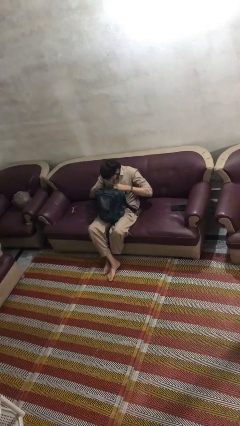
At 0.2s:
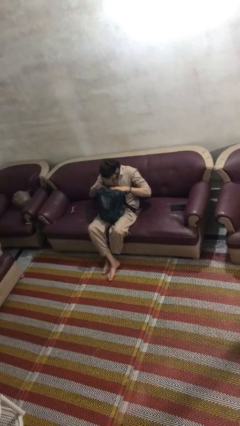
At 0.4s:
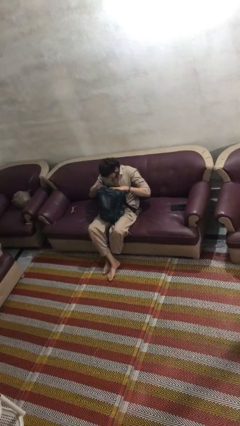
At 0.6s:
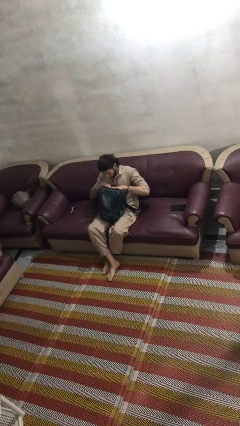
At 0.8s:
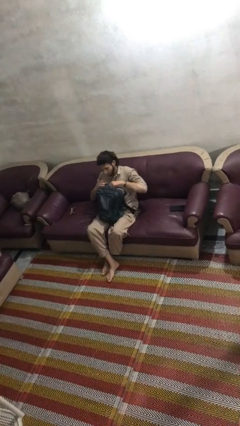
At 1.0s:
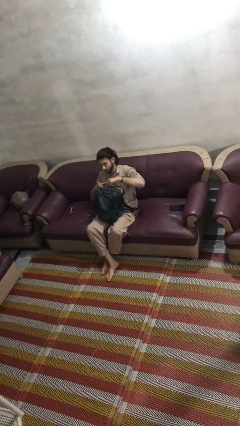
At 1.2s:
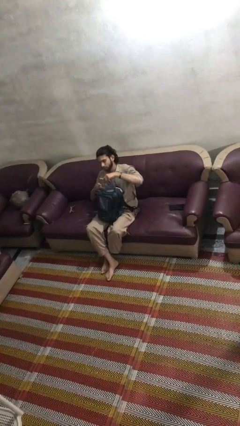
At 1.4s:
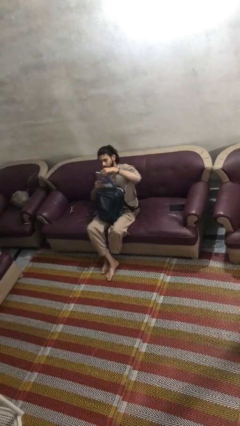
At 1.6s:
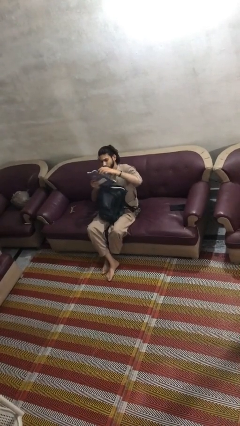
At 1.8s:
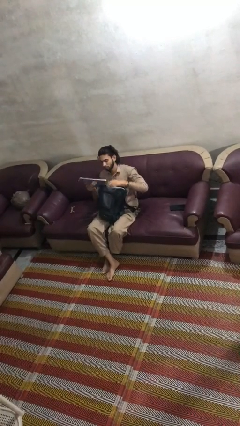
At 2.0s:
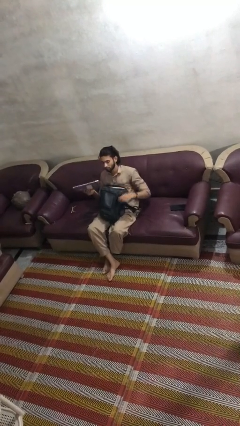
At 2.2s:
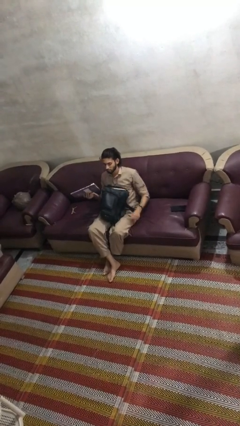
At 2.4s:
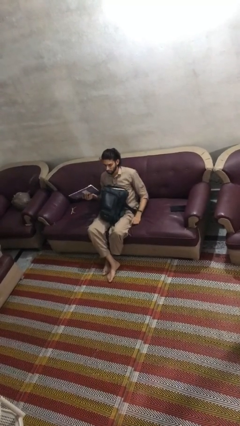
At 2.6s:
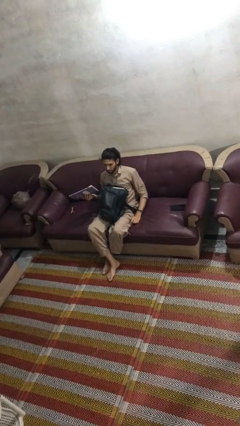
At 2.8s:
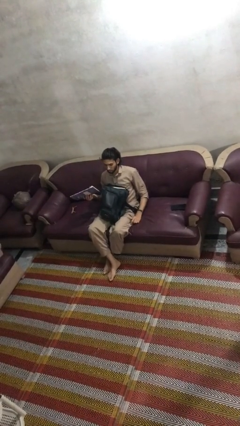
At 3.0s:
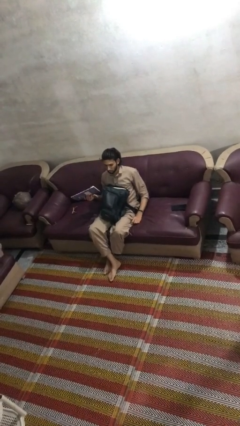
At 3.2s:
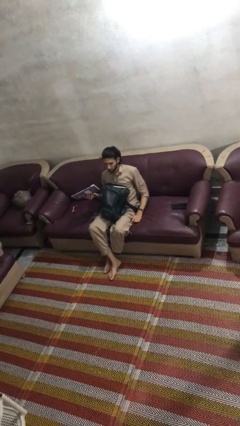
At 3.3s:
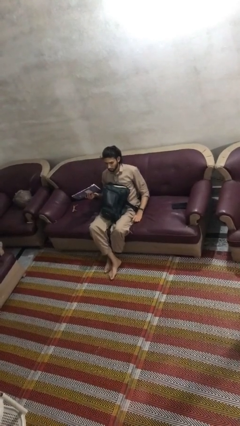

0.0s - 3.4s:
person takes object from backpack

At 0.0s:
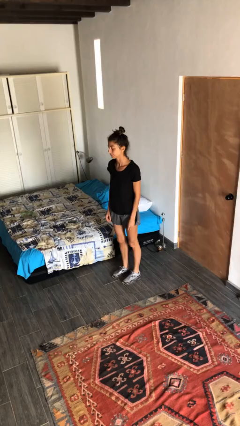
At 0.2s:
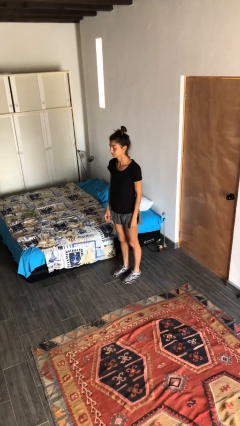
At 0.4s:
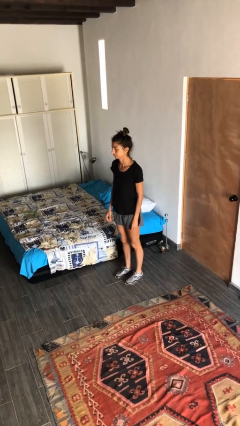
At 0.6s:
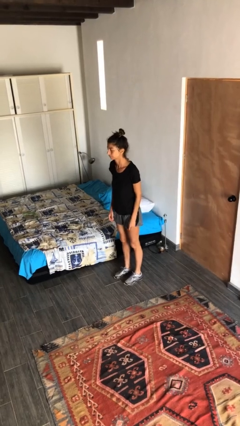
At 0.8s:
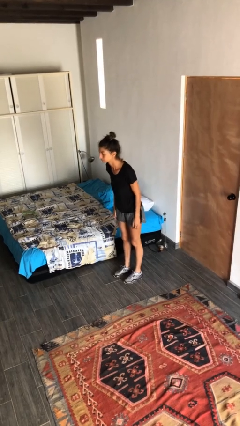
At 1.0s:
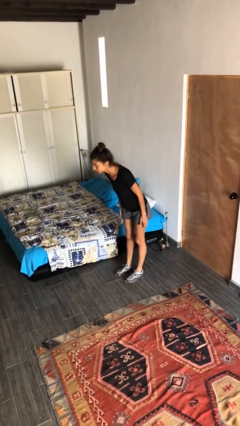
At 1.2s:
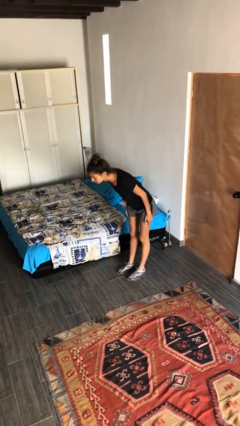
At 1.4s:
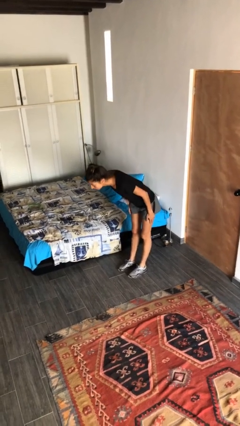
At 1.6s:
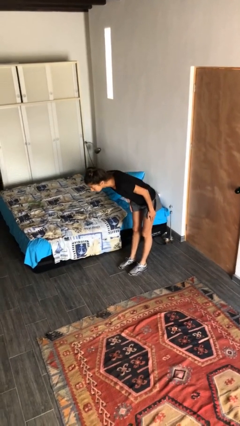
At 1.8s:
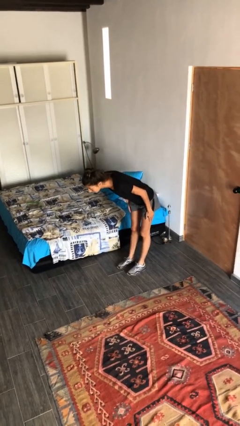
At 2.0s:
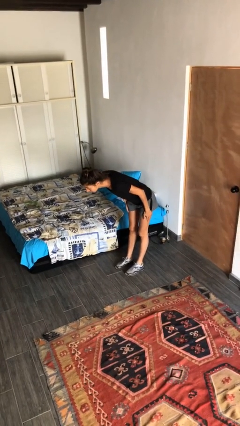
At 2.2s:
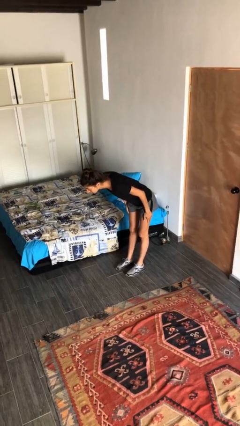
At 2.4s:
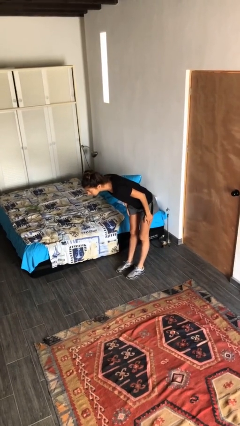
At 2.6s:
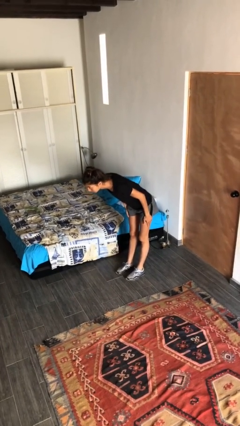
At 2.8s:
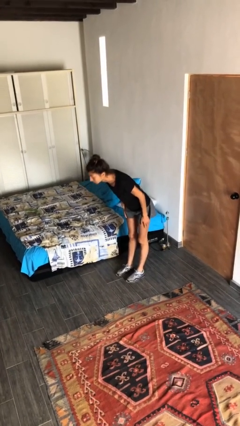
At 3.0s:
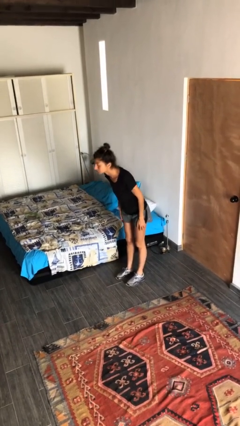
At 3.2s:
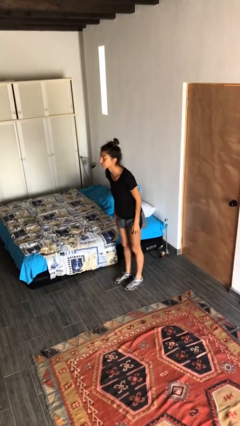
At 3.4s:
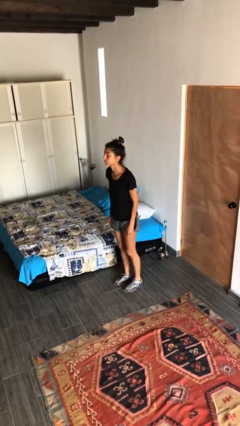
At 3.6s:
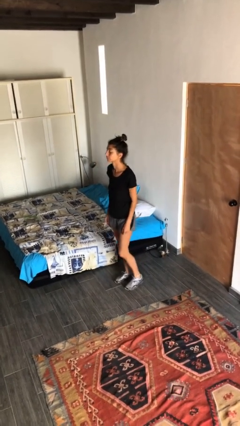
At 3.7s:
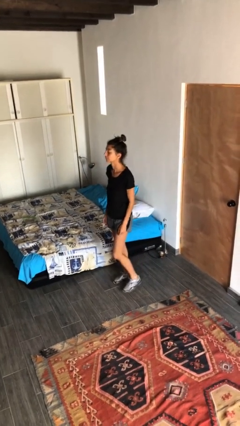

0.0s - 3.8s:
person bows

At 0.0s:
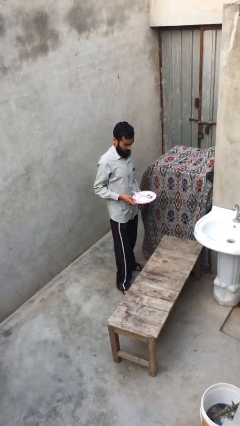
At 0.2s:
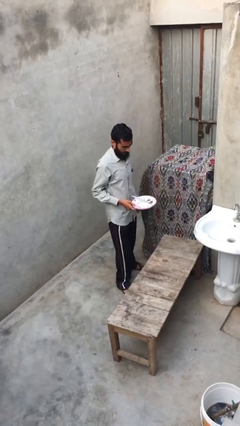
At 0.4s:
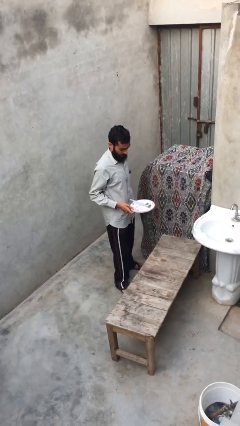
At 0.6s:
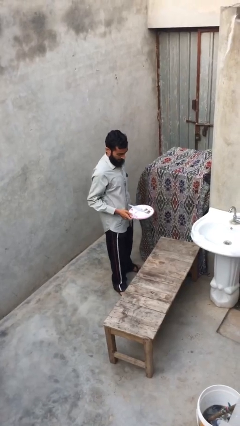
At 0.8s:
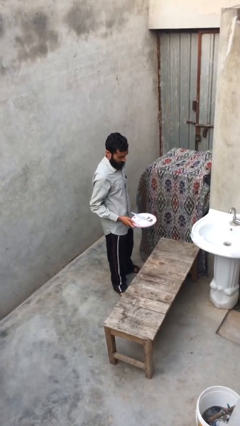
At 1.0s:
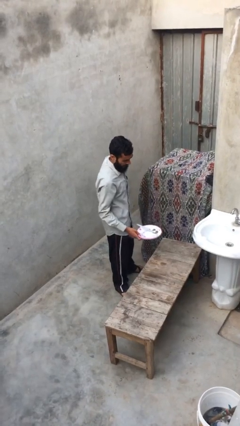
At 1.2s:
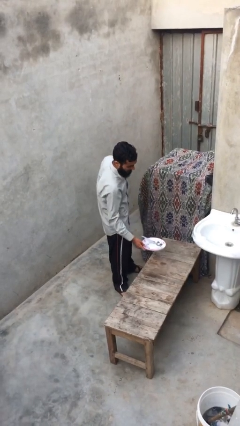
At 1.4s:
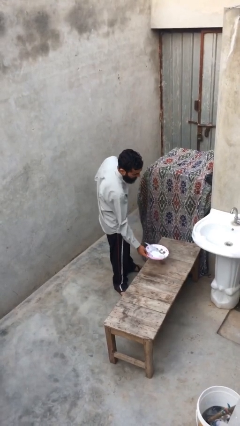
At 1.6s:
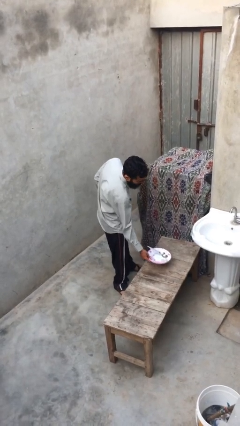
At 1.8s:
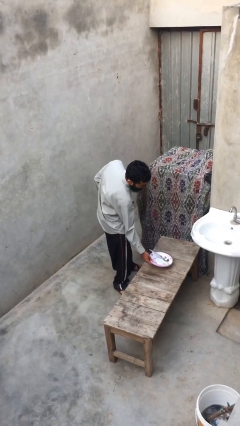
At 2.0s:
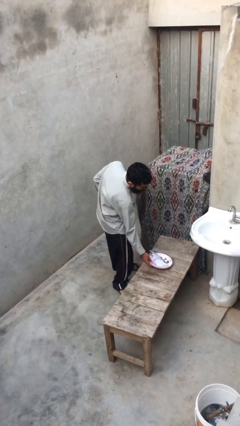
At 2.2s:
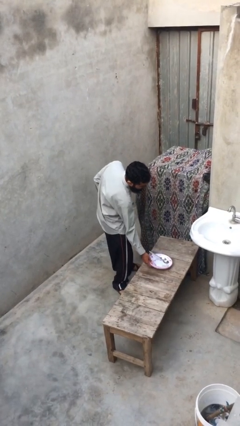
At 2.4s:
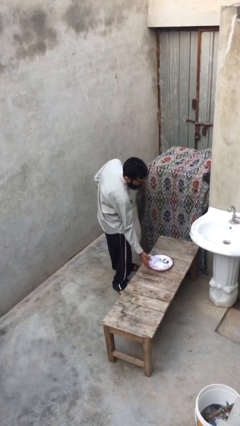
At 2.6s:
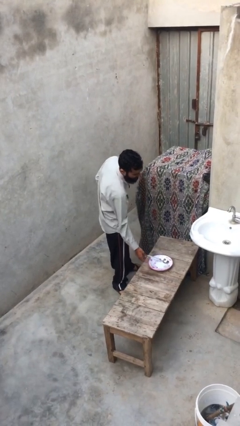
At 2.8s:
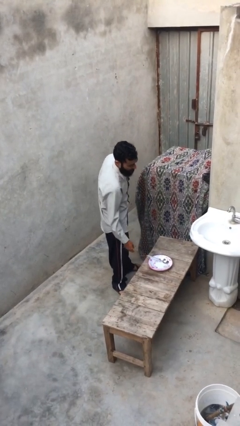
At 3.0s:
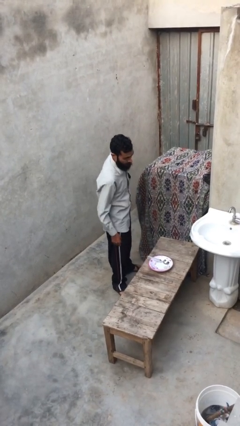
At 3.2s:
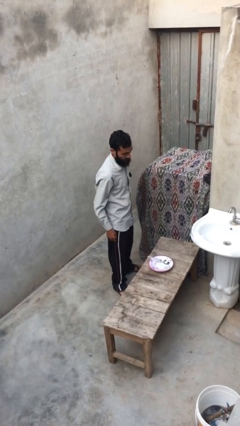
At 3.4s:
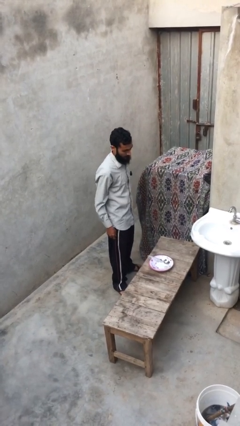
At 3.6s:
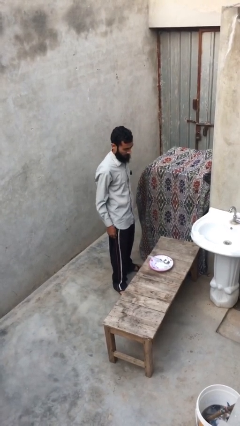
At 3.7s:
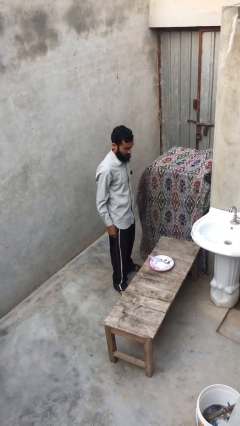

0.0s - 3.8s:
person puts down object on table

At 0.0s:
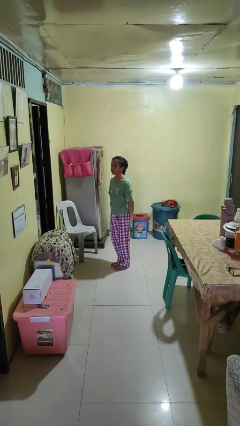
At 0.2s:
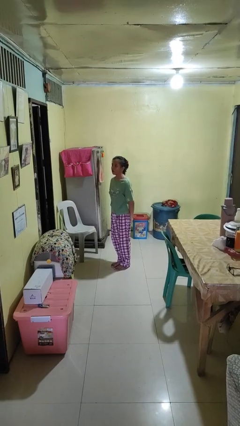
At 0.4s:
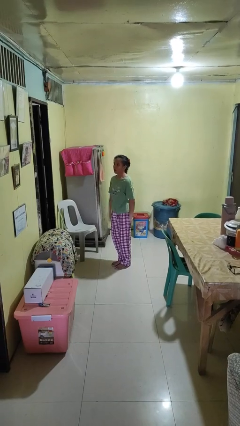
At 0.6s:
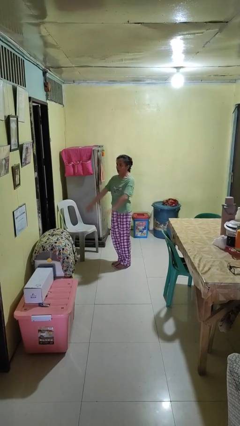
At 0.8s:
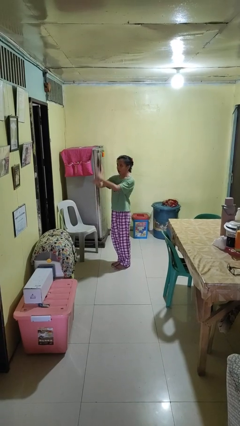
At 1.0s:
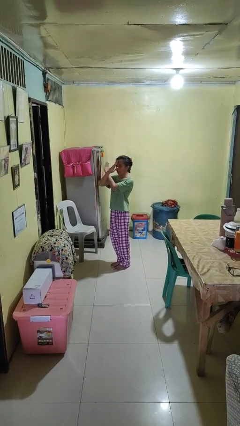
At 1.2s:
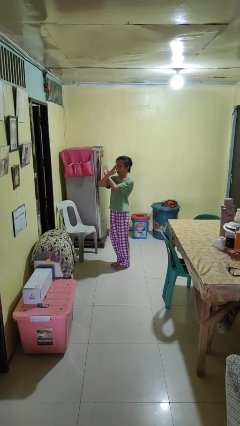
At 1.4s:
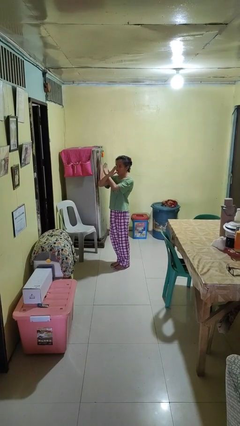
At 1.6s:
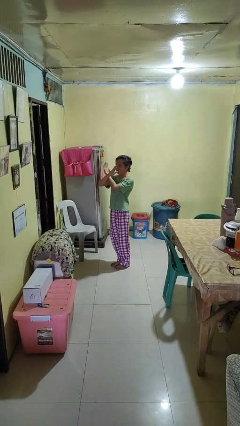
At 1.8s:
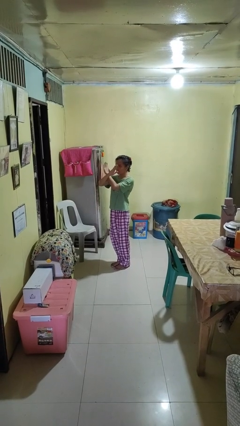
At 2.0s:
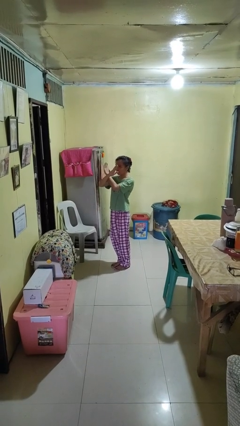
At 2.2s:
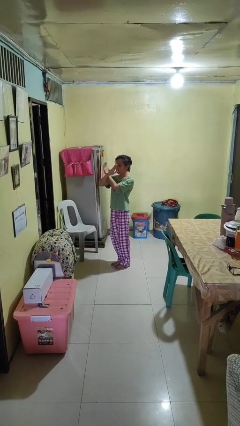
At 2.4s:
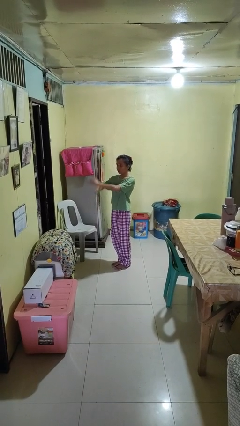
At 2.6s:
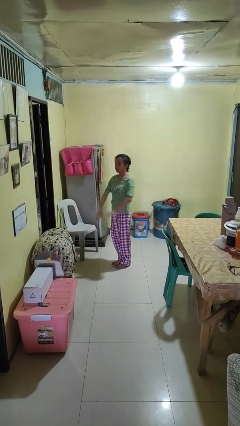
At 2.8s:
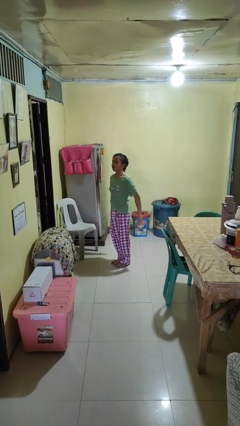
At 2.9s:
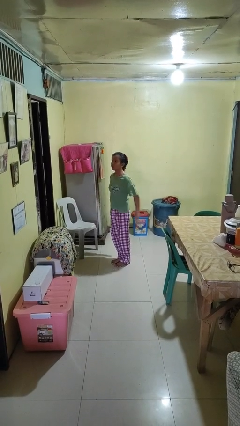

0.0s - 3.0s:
person gestures arms x

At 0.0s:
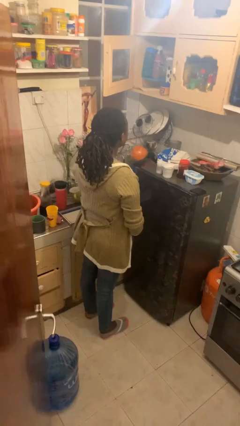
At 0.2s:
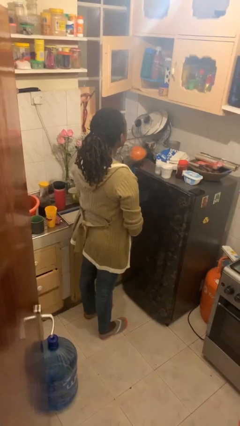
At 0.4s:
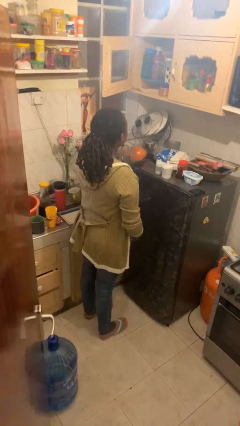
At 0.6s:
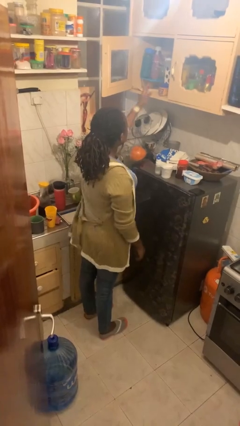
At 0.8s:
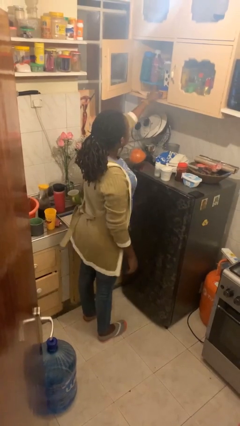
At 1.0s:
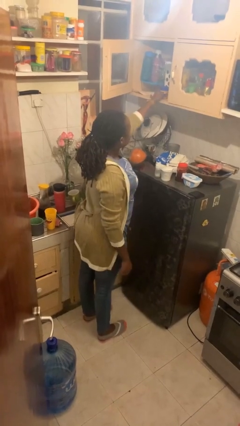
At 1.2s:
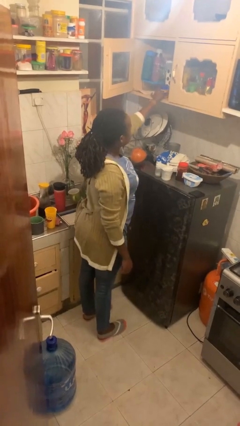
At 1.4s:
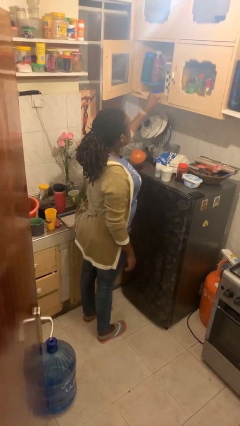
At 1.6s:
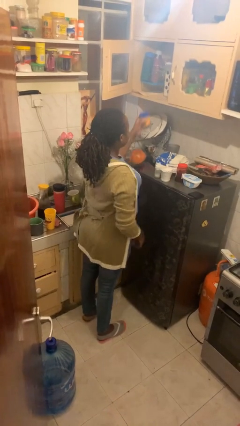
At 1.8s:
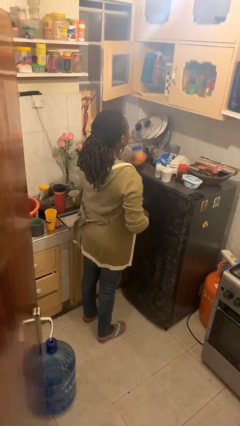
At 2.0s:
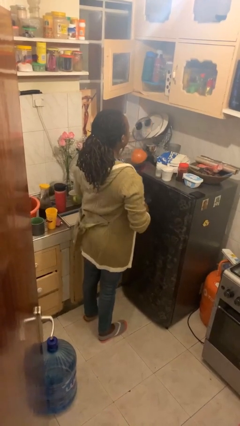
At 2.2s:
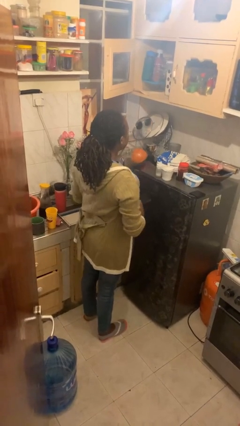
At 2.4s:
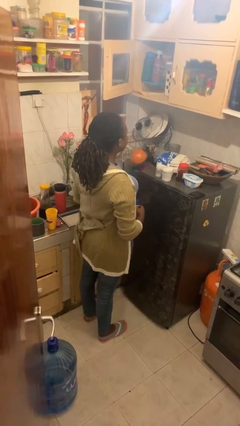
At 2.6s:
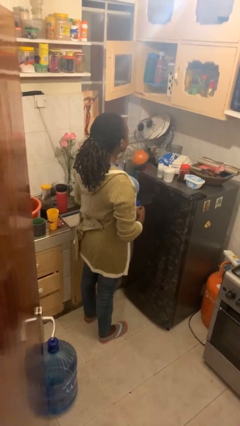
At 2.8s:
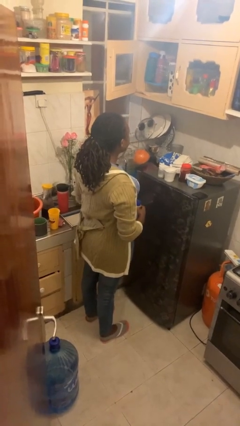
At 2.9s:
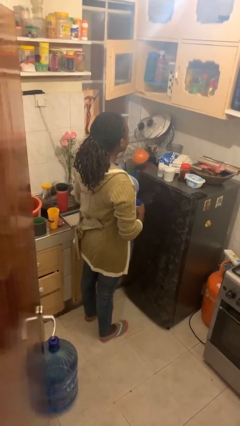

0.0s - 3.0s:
person picks up object from countertop

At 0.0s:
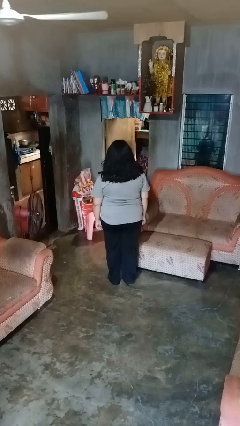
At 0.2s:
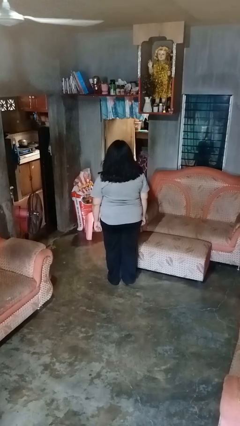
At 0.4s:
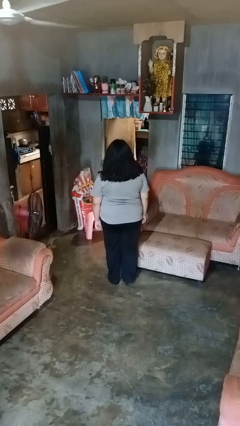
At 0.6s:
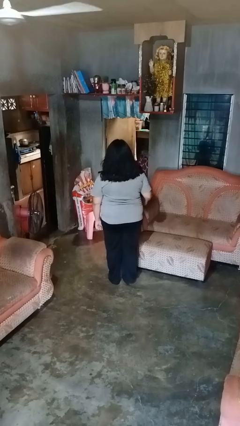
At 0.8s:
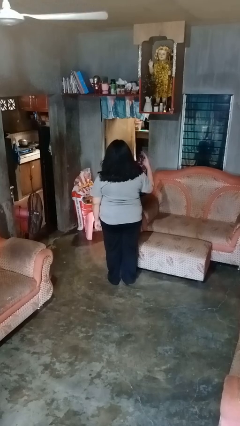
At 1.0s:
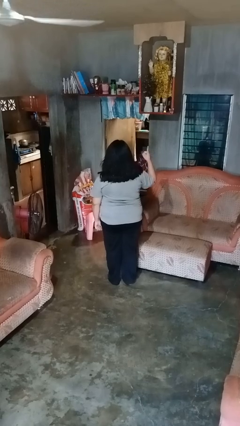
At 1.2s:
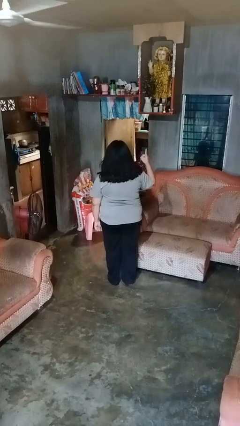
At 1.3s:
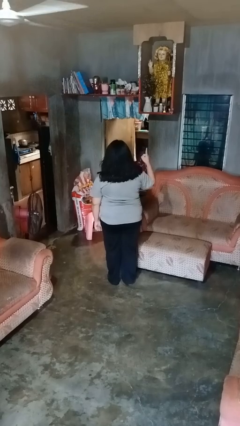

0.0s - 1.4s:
person gestures number one
